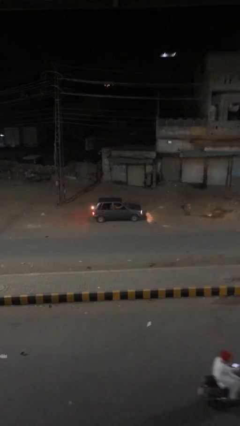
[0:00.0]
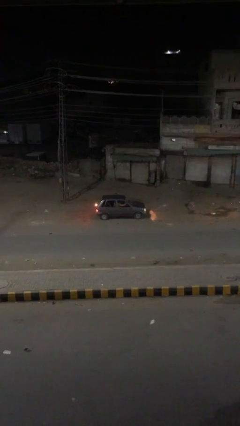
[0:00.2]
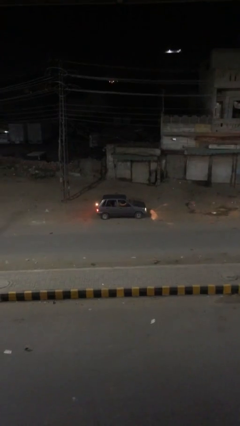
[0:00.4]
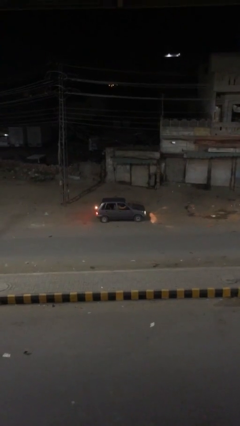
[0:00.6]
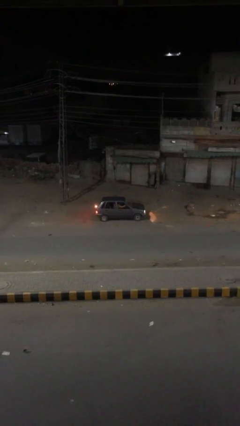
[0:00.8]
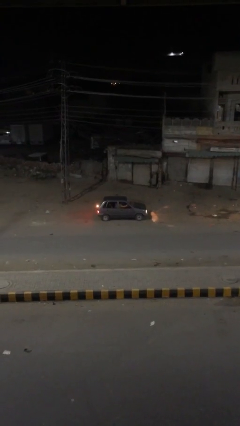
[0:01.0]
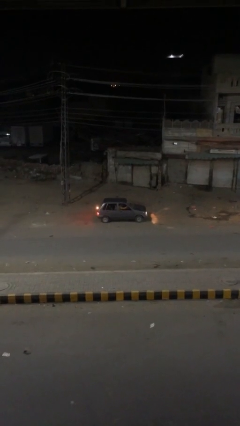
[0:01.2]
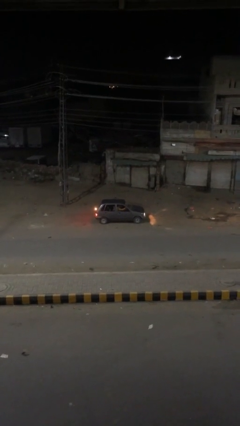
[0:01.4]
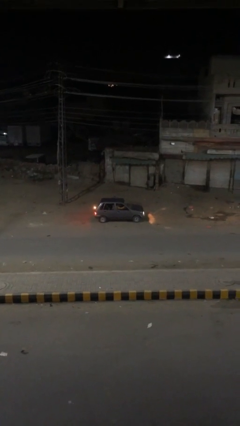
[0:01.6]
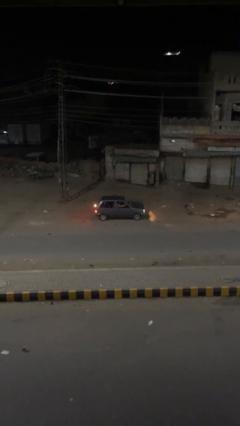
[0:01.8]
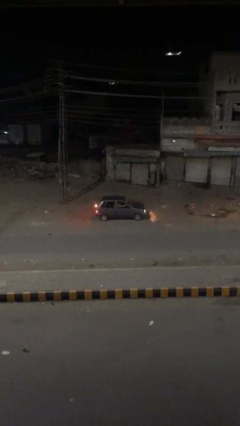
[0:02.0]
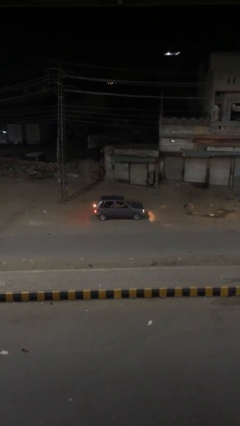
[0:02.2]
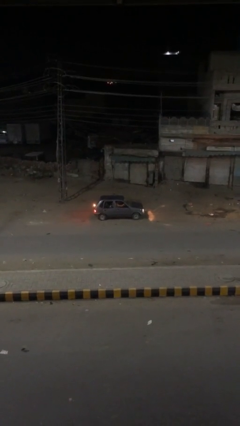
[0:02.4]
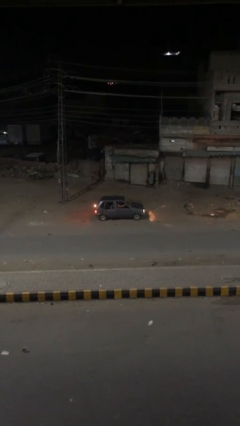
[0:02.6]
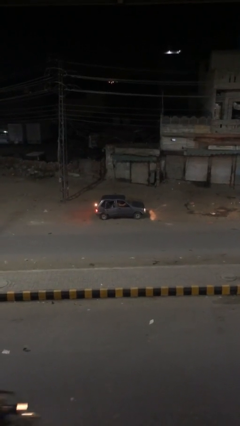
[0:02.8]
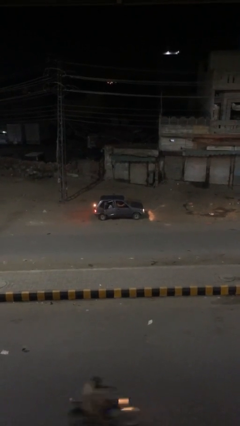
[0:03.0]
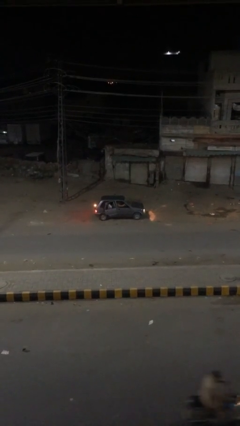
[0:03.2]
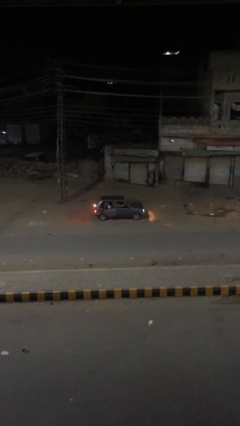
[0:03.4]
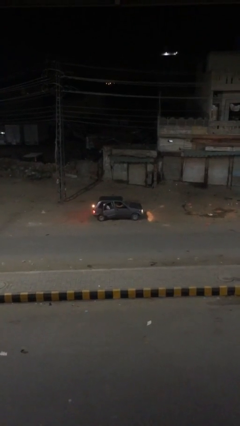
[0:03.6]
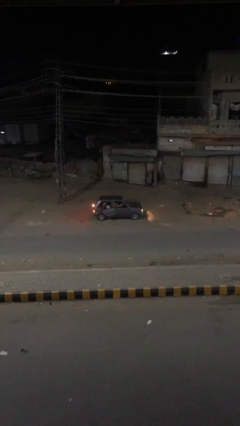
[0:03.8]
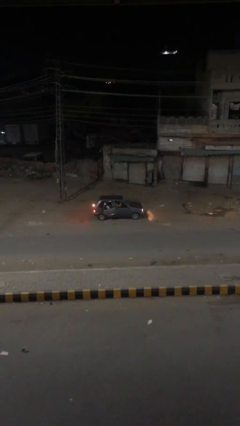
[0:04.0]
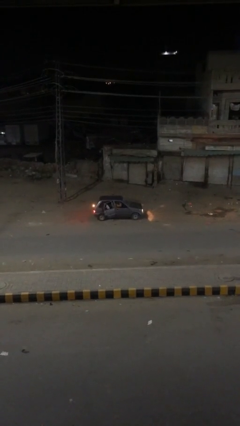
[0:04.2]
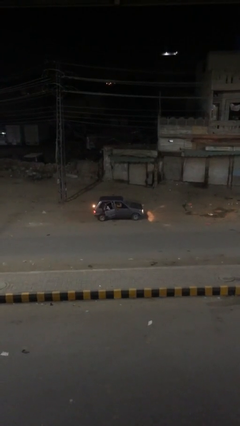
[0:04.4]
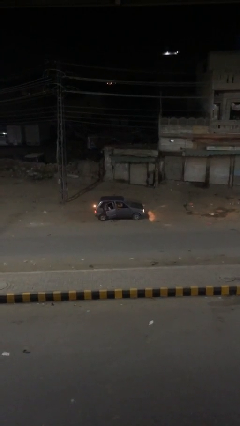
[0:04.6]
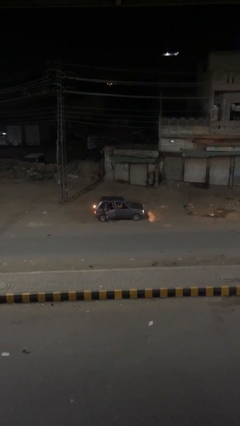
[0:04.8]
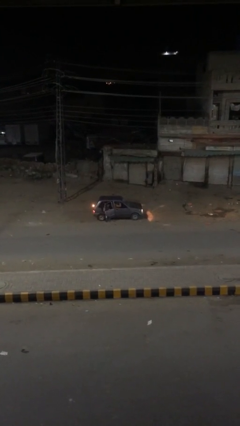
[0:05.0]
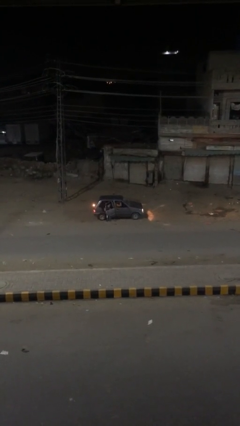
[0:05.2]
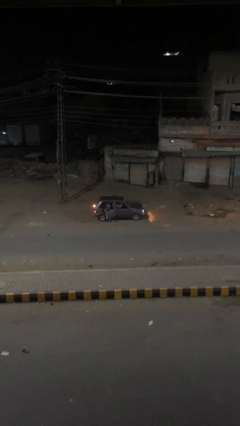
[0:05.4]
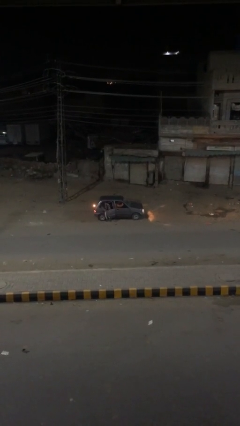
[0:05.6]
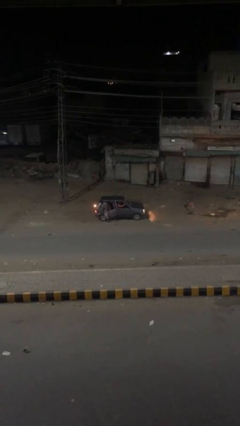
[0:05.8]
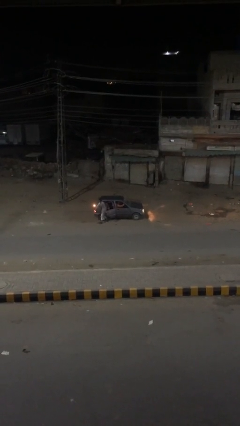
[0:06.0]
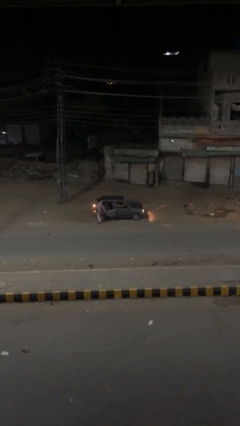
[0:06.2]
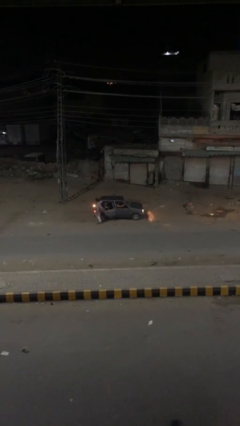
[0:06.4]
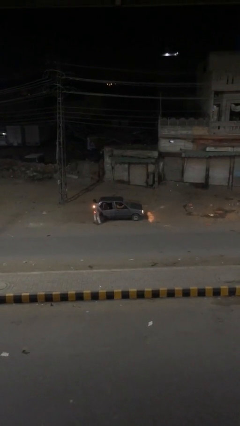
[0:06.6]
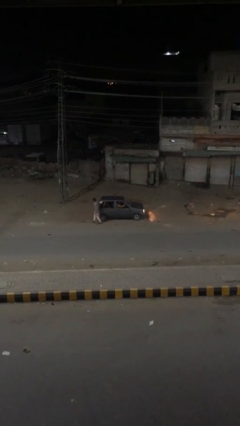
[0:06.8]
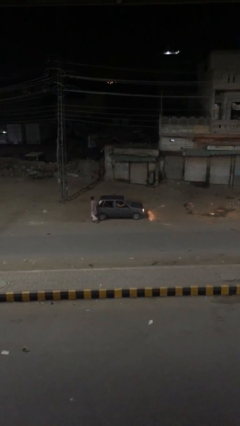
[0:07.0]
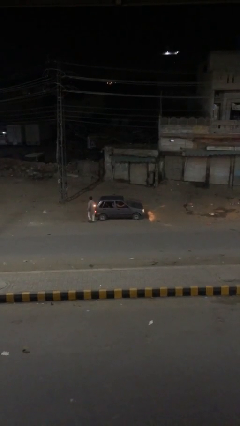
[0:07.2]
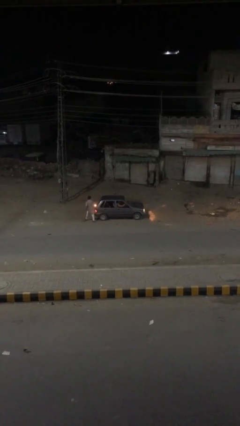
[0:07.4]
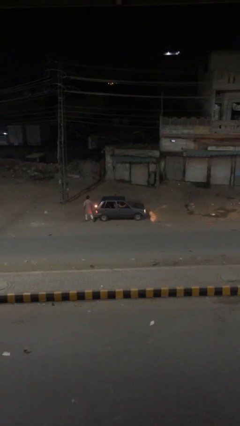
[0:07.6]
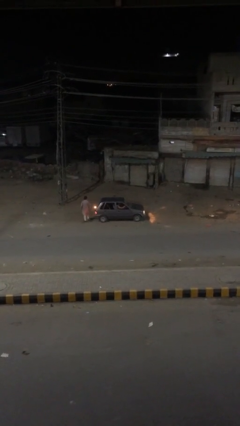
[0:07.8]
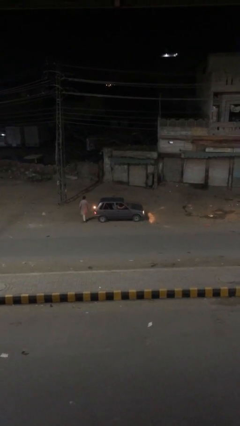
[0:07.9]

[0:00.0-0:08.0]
car drops off person

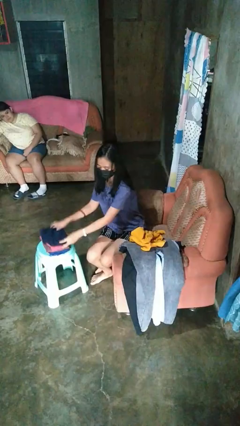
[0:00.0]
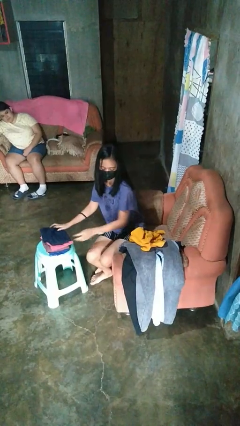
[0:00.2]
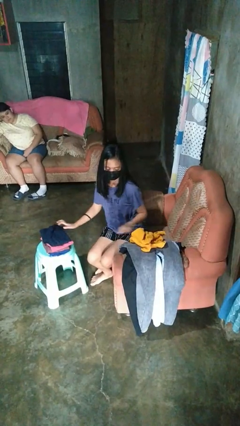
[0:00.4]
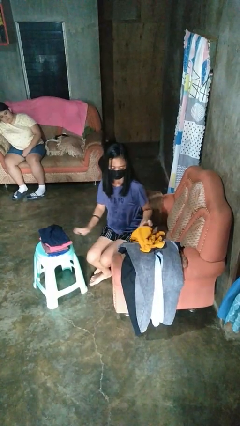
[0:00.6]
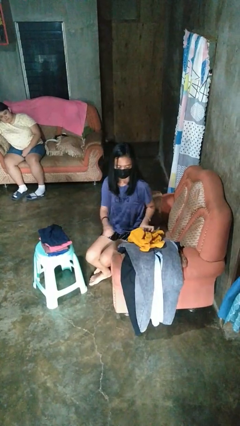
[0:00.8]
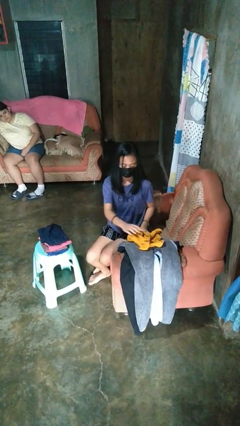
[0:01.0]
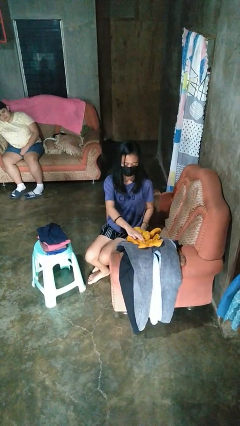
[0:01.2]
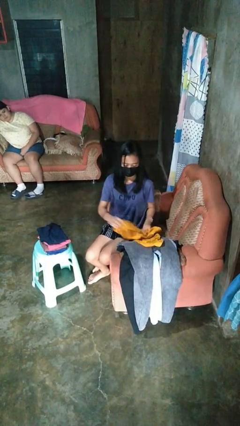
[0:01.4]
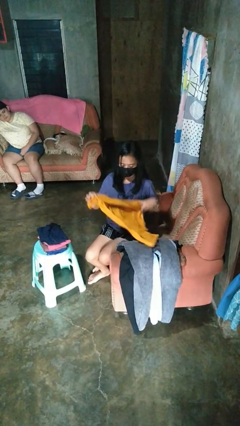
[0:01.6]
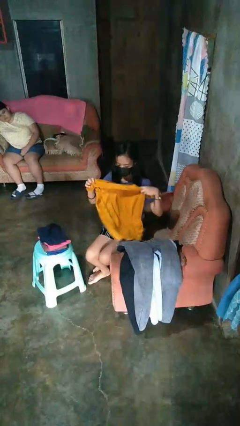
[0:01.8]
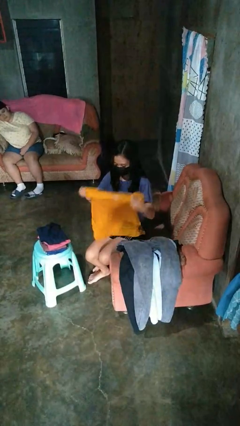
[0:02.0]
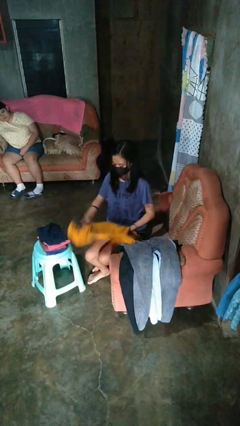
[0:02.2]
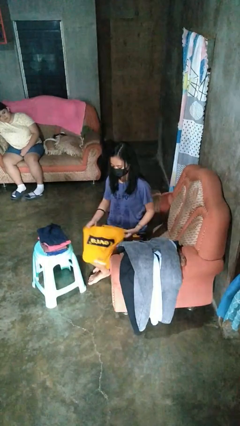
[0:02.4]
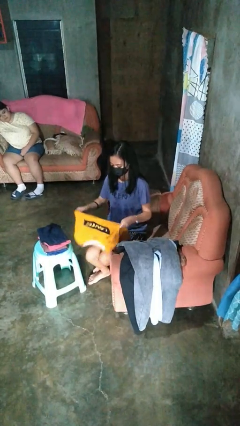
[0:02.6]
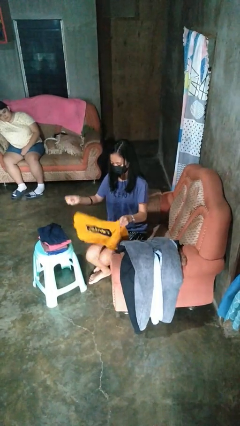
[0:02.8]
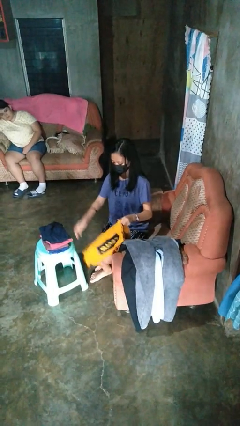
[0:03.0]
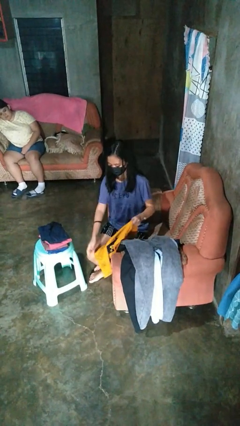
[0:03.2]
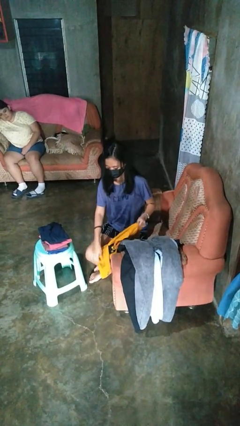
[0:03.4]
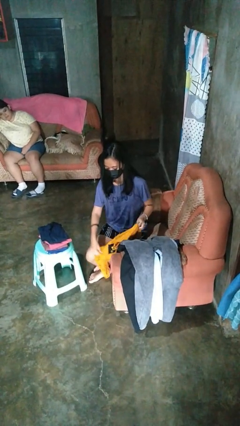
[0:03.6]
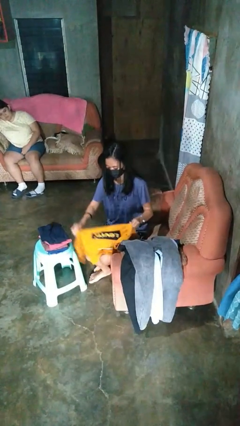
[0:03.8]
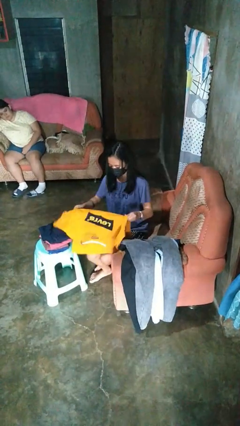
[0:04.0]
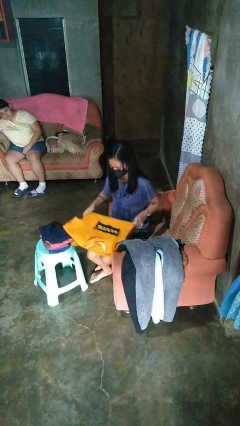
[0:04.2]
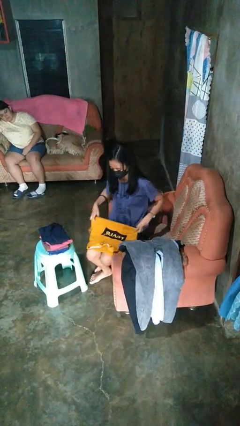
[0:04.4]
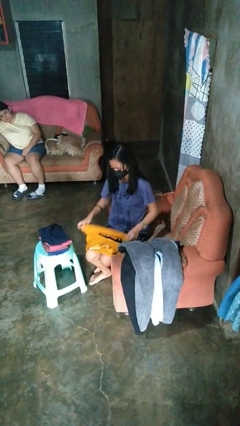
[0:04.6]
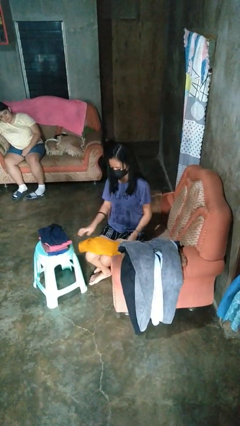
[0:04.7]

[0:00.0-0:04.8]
person folds shirt

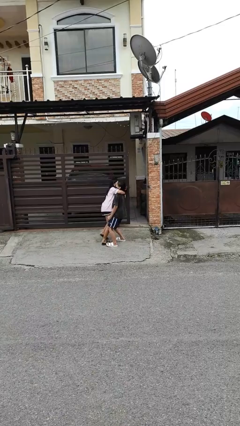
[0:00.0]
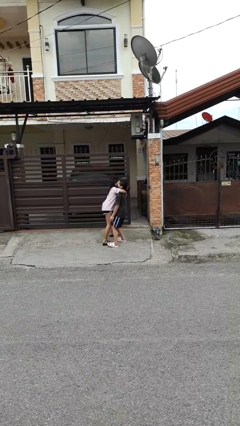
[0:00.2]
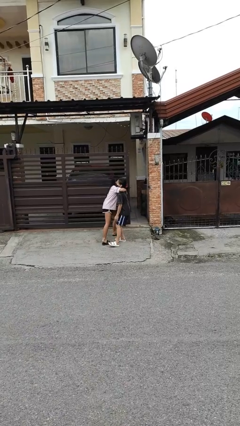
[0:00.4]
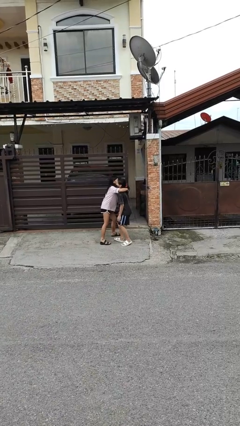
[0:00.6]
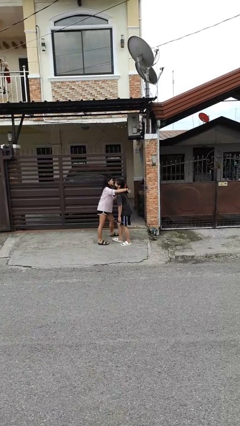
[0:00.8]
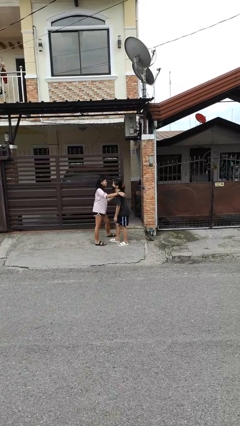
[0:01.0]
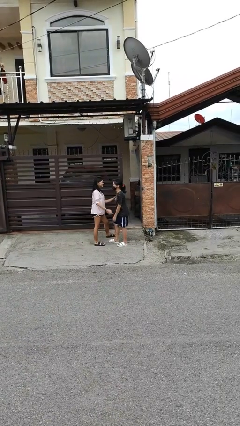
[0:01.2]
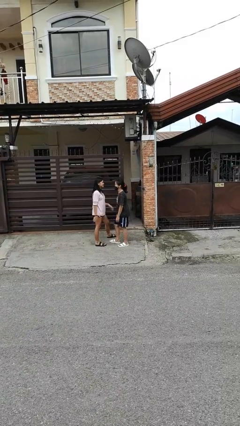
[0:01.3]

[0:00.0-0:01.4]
person puts down person

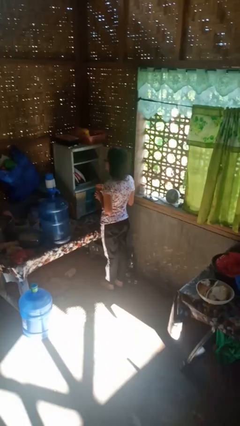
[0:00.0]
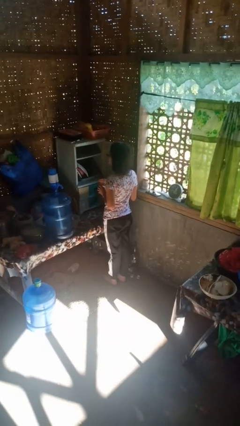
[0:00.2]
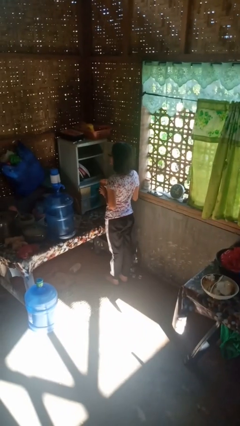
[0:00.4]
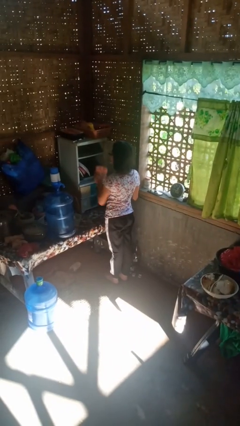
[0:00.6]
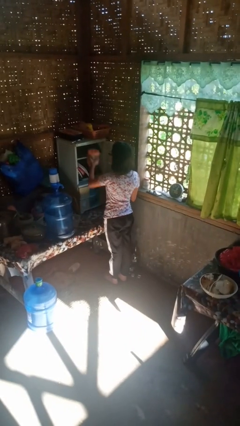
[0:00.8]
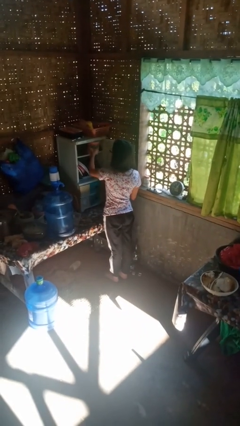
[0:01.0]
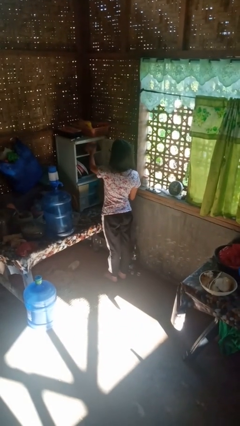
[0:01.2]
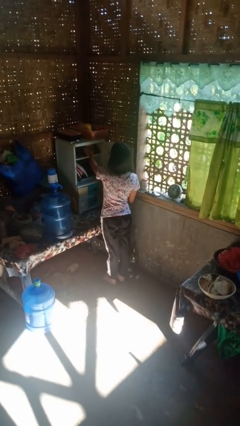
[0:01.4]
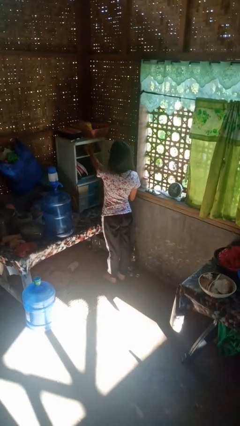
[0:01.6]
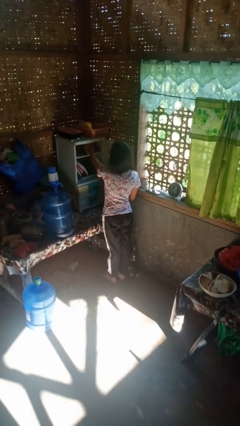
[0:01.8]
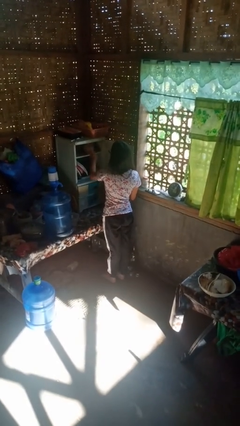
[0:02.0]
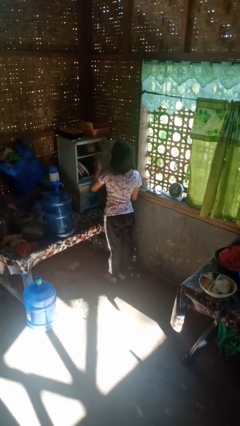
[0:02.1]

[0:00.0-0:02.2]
person puts down object into cabinet

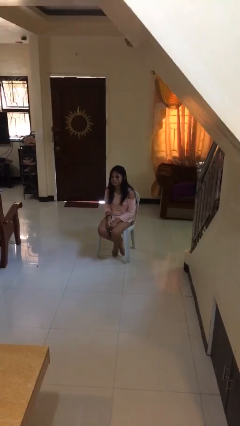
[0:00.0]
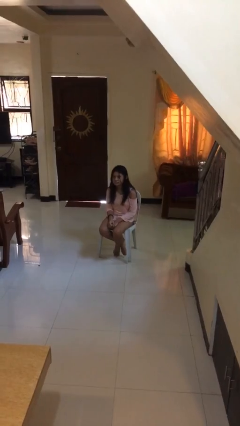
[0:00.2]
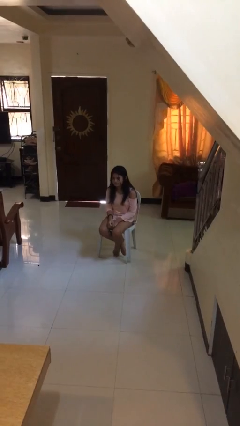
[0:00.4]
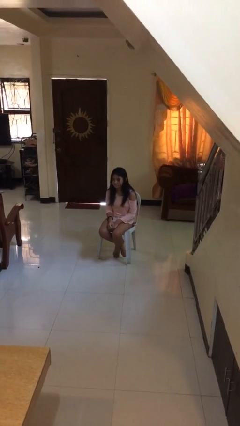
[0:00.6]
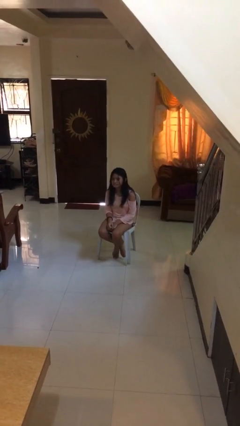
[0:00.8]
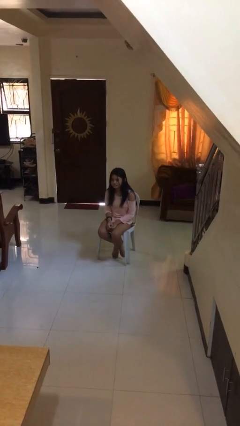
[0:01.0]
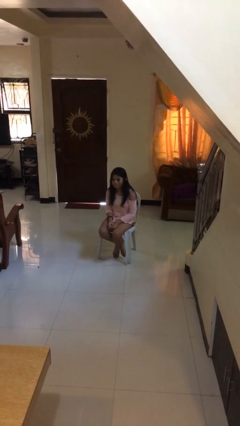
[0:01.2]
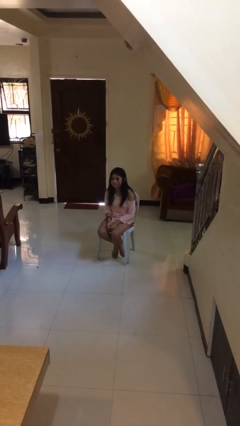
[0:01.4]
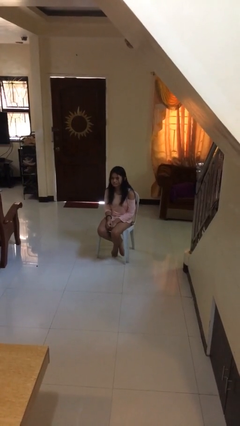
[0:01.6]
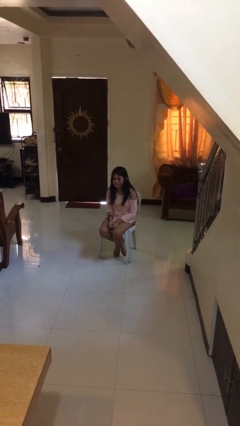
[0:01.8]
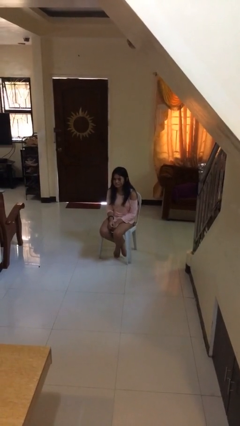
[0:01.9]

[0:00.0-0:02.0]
person nods head
